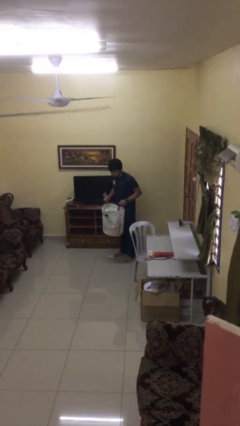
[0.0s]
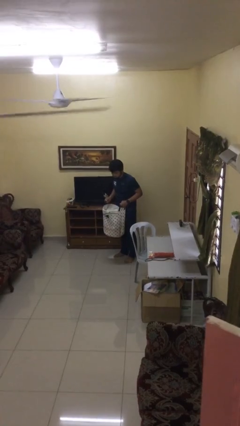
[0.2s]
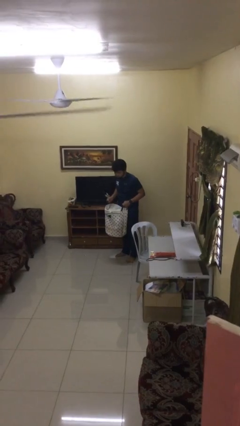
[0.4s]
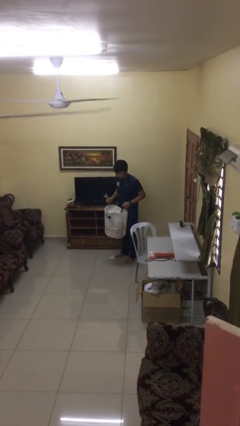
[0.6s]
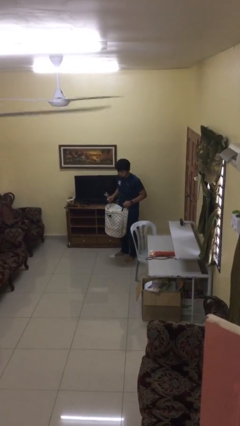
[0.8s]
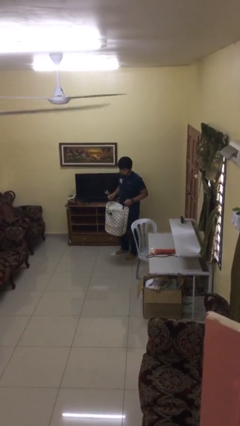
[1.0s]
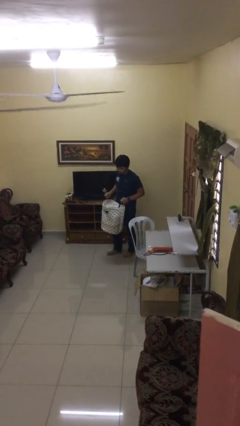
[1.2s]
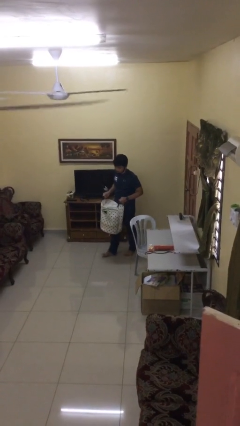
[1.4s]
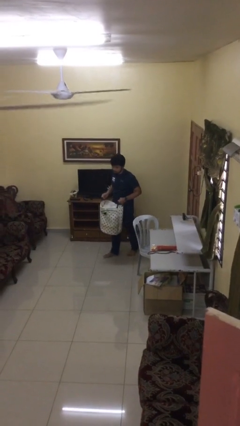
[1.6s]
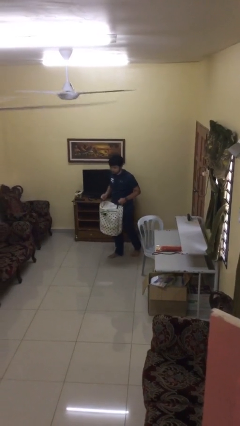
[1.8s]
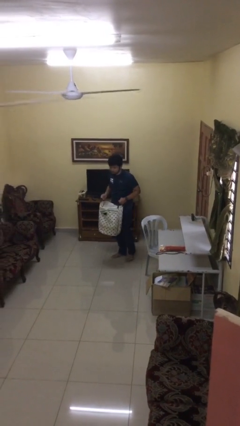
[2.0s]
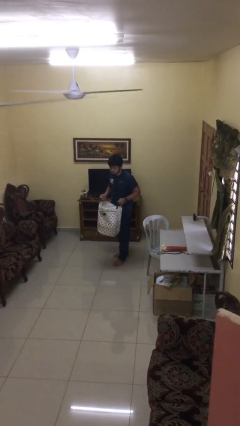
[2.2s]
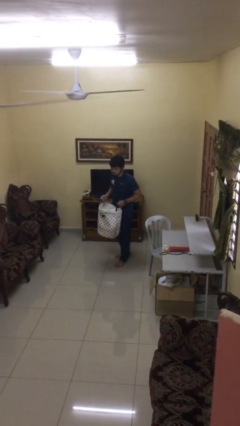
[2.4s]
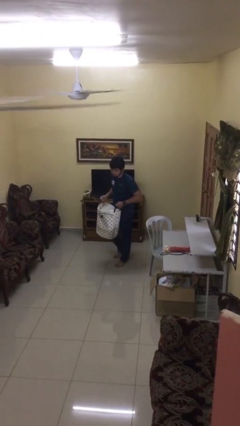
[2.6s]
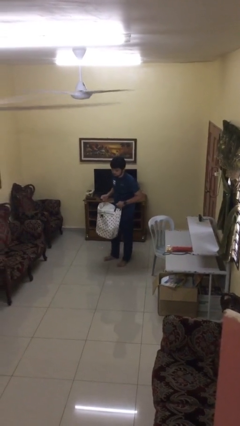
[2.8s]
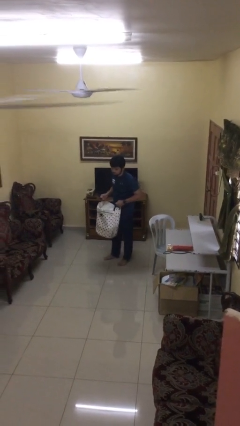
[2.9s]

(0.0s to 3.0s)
person carries laundry basket

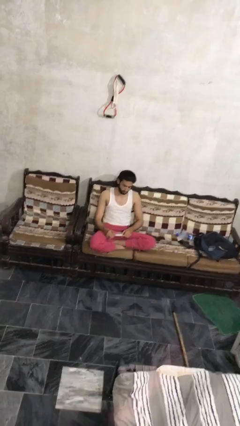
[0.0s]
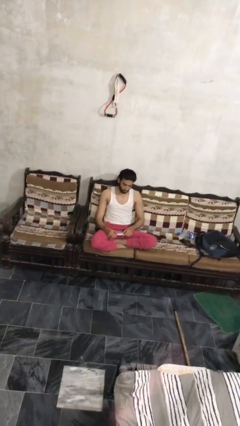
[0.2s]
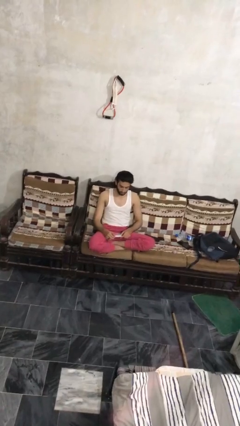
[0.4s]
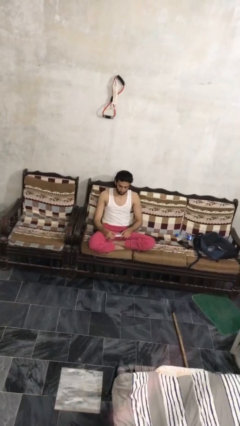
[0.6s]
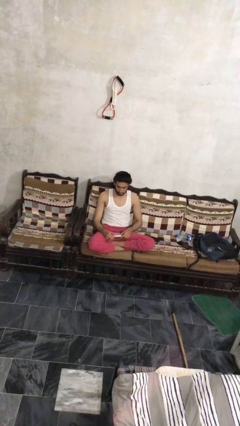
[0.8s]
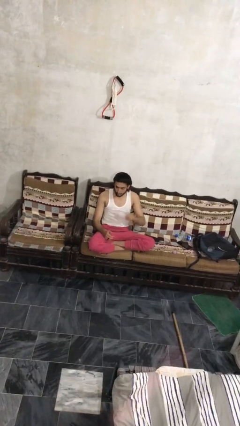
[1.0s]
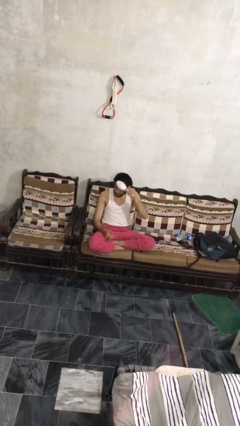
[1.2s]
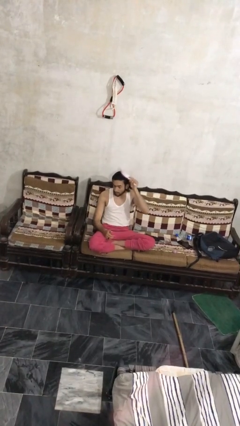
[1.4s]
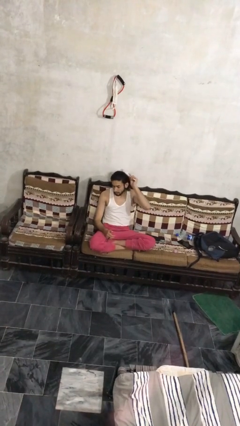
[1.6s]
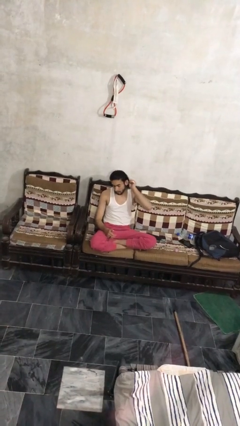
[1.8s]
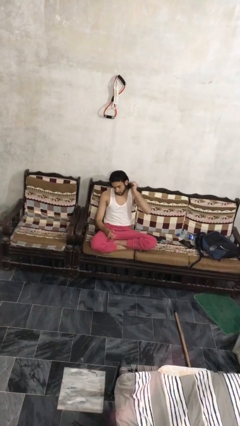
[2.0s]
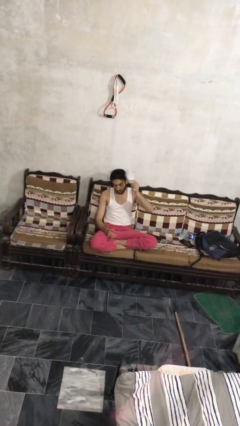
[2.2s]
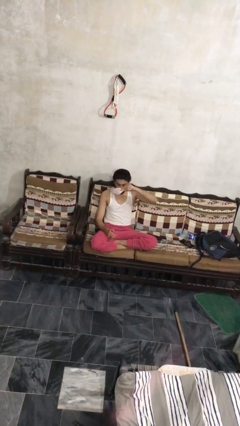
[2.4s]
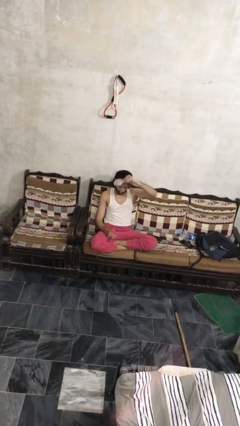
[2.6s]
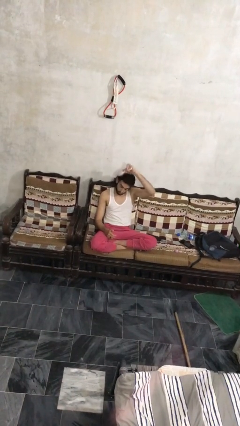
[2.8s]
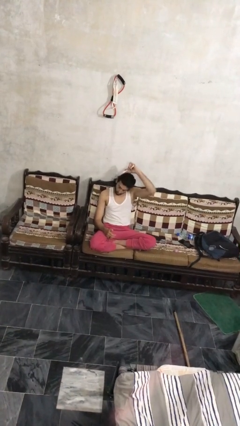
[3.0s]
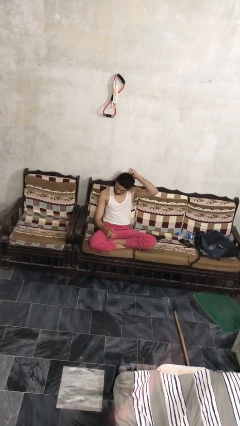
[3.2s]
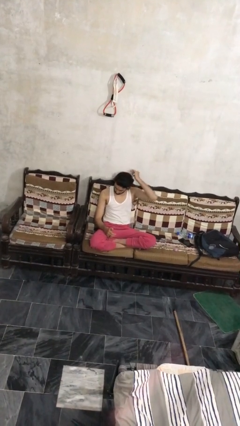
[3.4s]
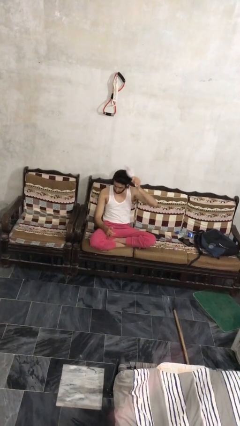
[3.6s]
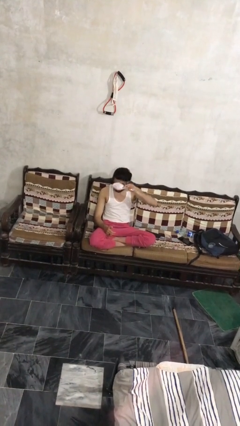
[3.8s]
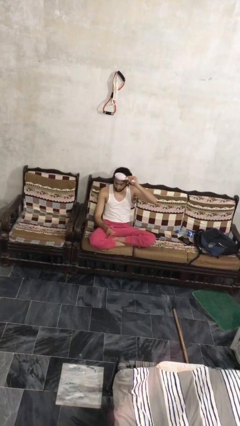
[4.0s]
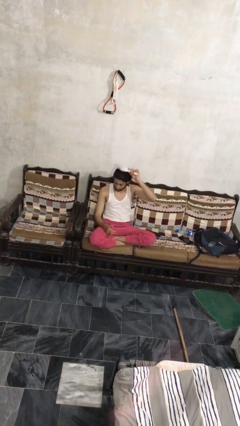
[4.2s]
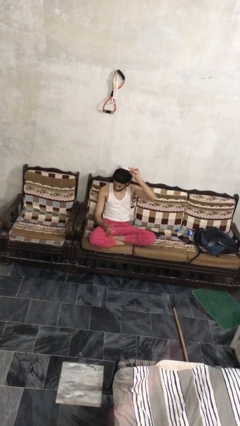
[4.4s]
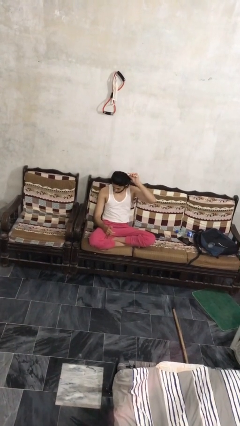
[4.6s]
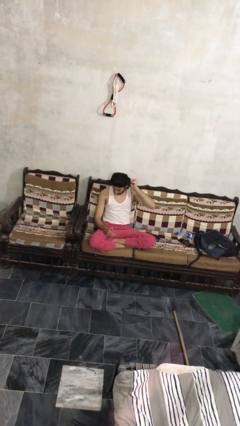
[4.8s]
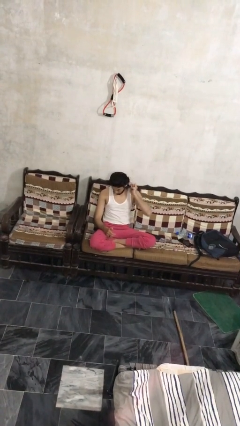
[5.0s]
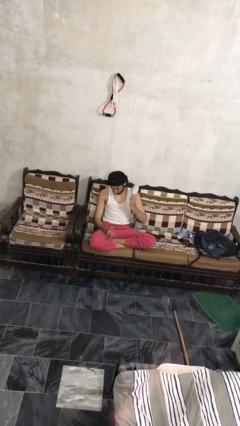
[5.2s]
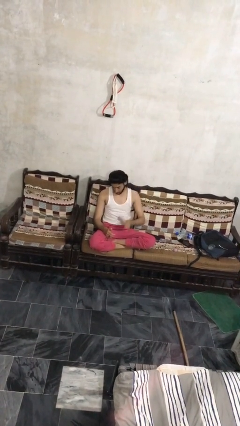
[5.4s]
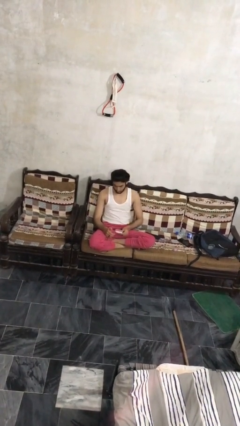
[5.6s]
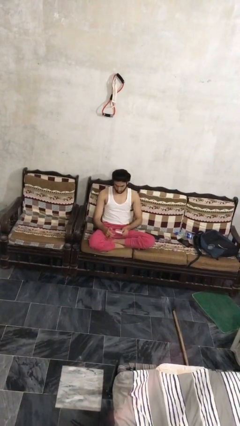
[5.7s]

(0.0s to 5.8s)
person brushes hair

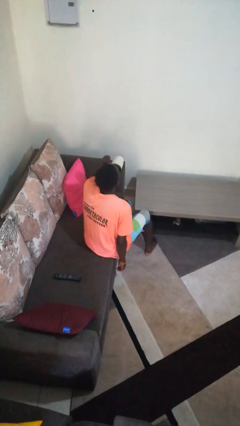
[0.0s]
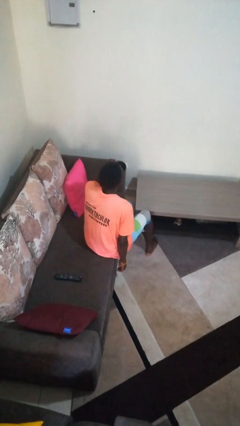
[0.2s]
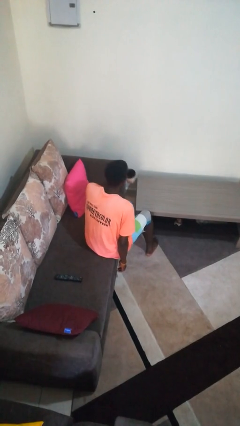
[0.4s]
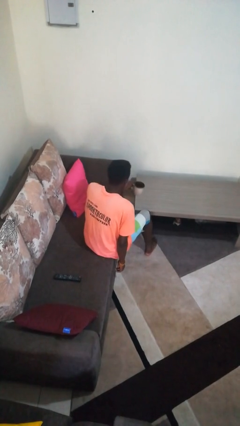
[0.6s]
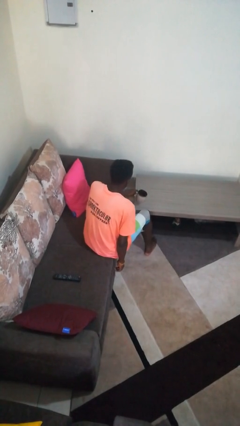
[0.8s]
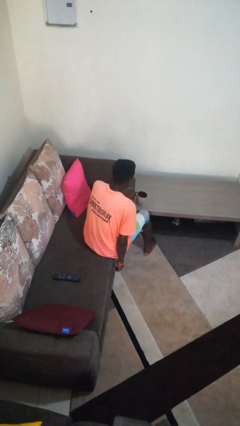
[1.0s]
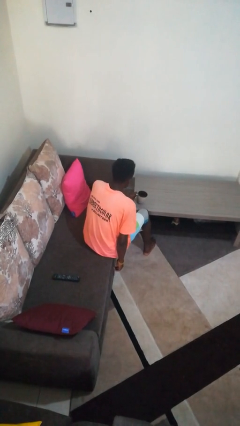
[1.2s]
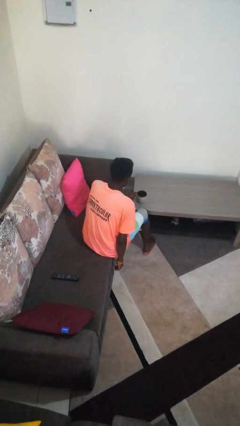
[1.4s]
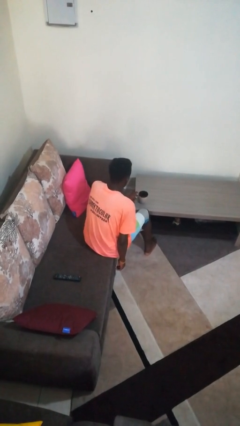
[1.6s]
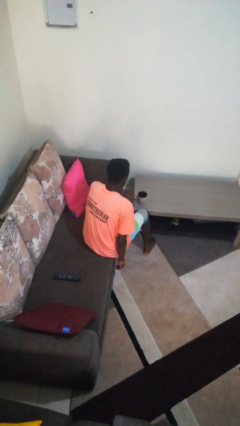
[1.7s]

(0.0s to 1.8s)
person puts down object on table

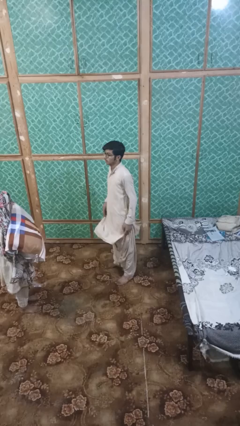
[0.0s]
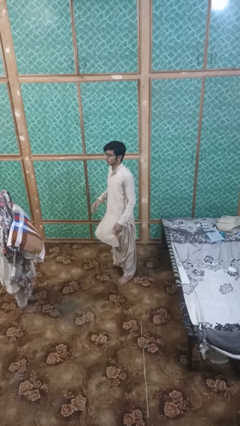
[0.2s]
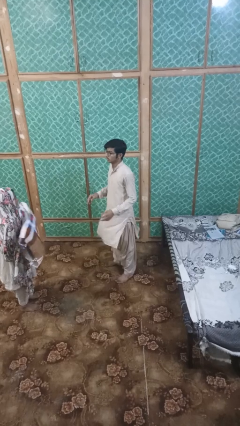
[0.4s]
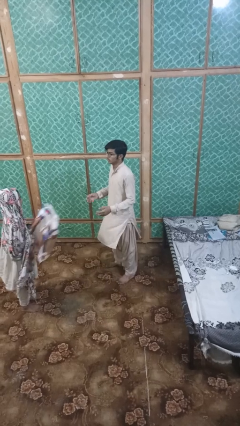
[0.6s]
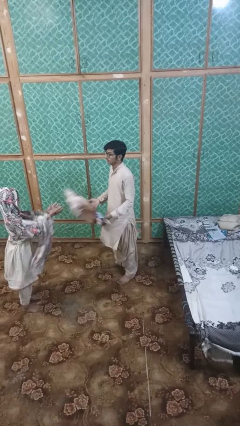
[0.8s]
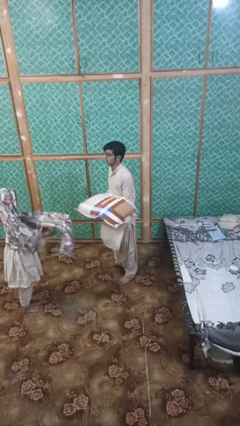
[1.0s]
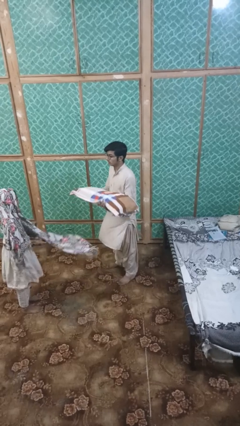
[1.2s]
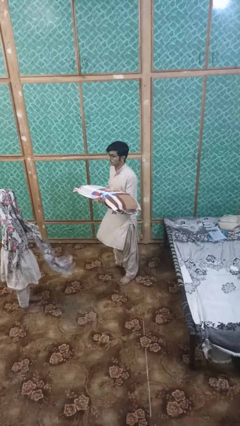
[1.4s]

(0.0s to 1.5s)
person catches object from person

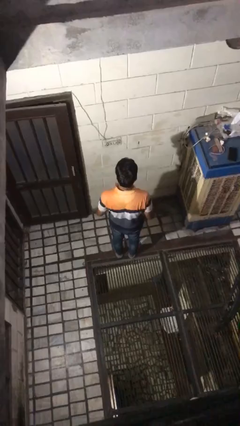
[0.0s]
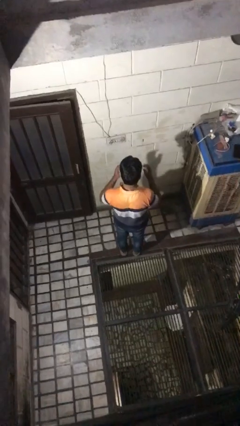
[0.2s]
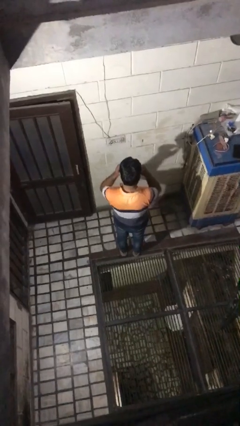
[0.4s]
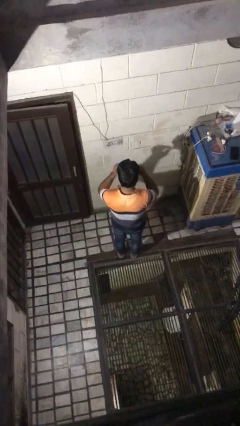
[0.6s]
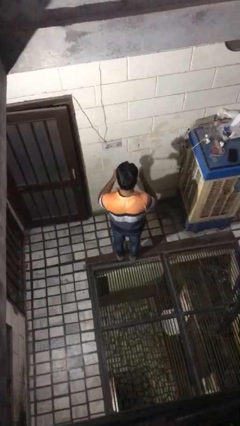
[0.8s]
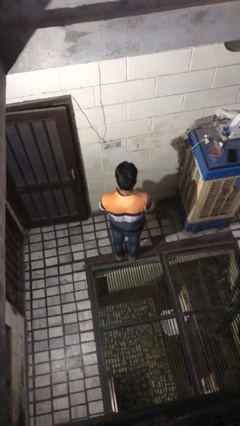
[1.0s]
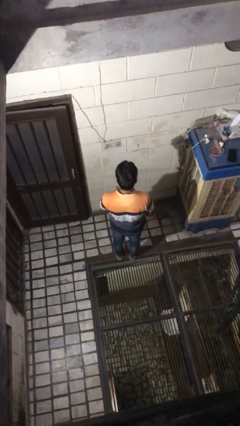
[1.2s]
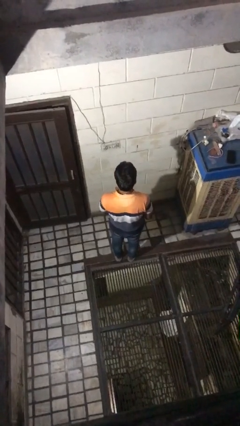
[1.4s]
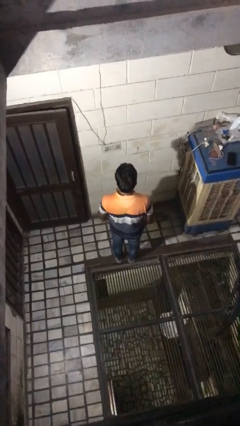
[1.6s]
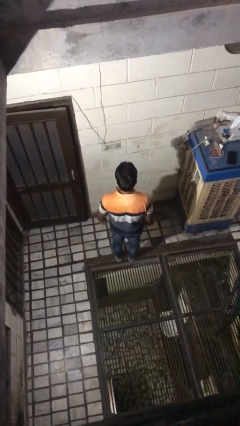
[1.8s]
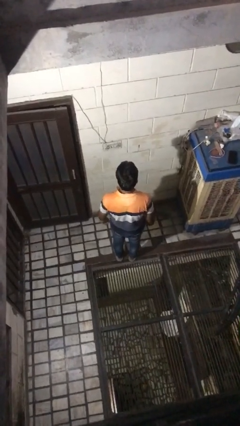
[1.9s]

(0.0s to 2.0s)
person takes off glasses

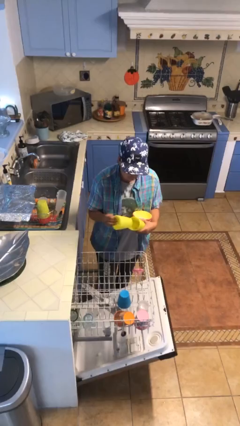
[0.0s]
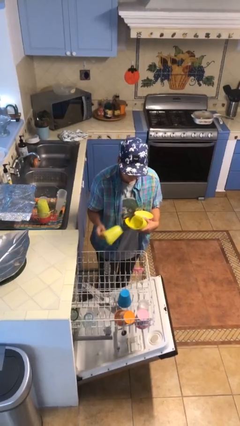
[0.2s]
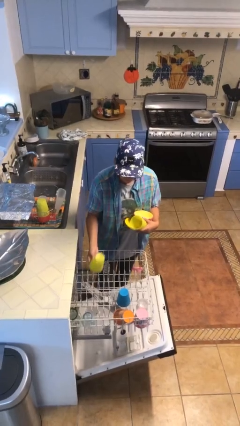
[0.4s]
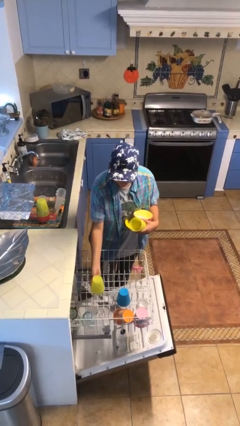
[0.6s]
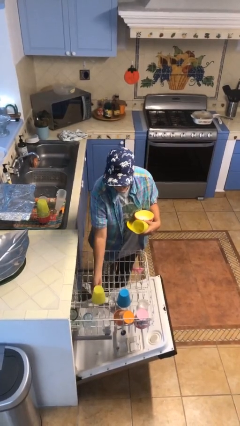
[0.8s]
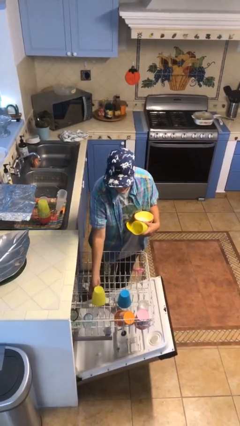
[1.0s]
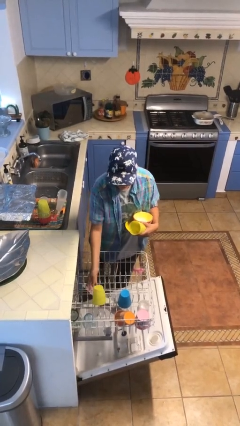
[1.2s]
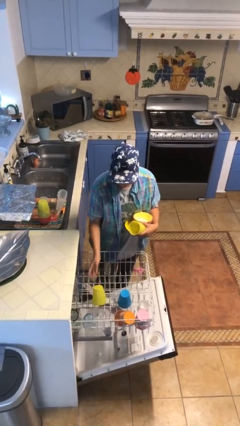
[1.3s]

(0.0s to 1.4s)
person loads dishwasher

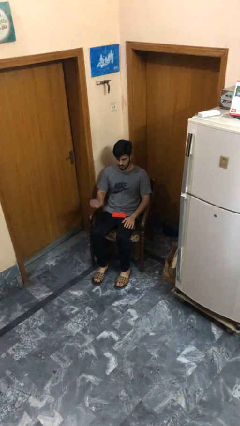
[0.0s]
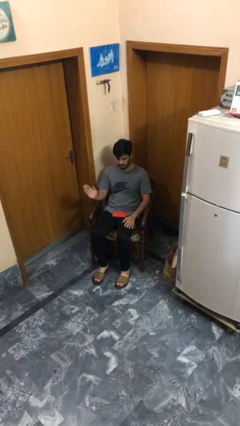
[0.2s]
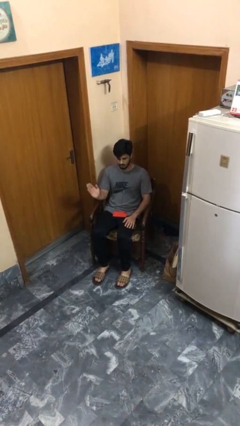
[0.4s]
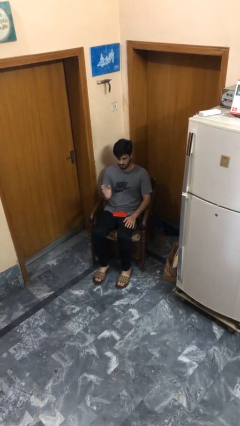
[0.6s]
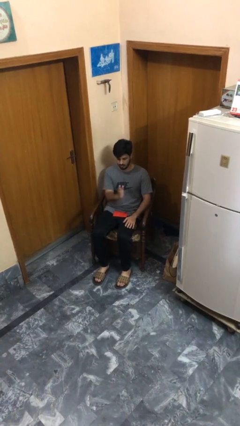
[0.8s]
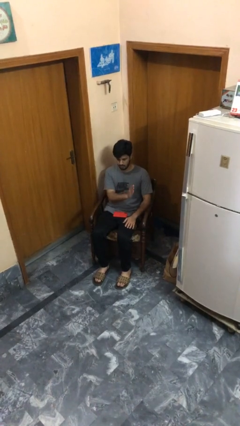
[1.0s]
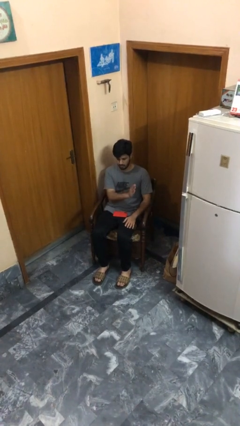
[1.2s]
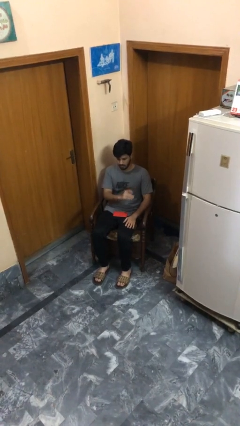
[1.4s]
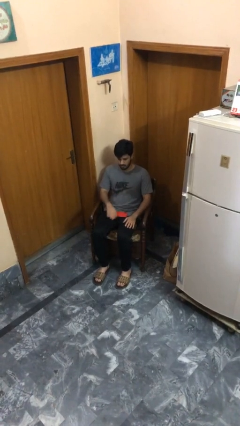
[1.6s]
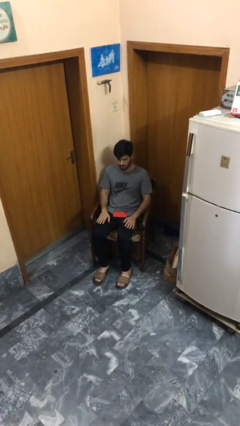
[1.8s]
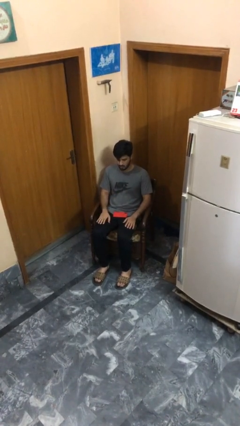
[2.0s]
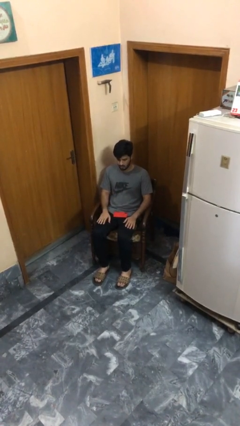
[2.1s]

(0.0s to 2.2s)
person gestures swipe left
